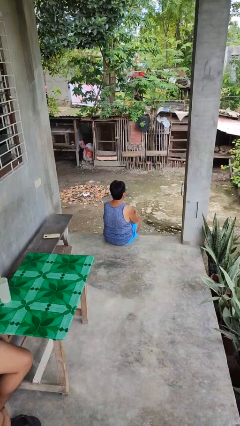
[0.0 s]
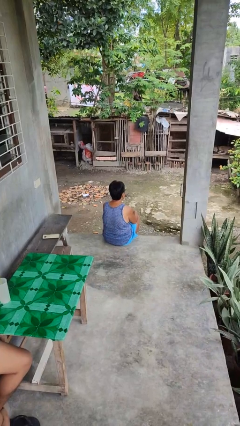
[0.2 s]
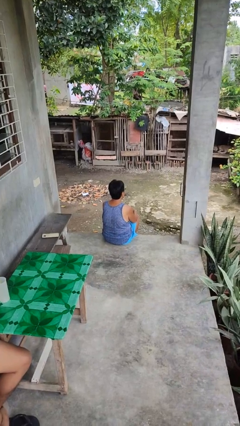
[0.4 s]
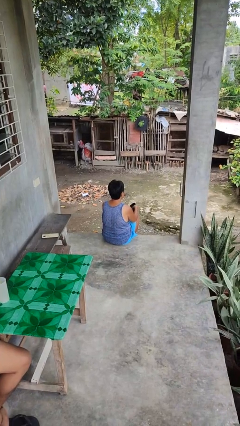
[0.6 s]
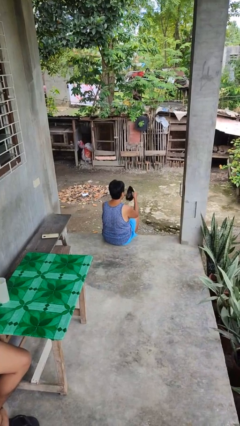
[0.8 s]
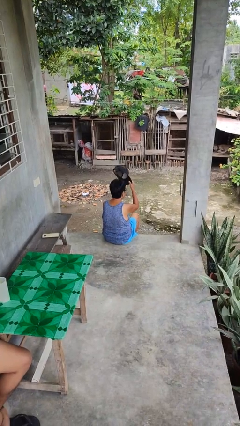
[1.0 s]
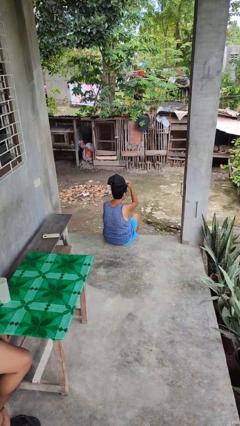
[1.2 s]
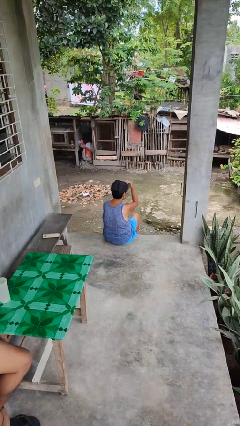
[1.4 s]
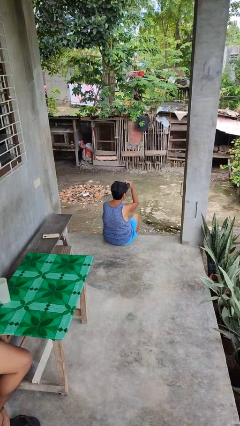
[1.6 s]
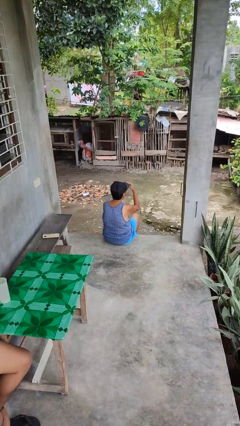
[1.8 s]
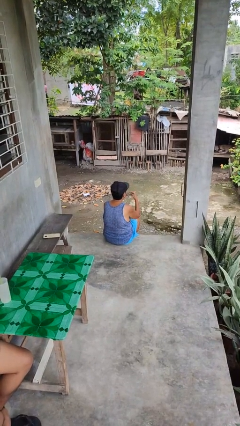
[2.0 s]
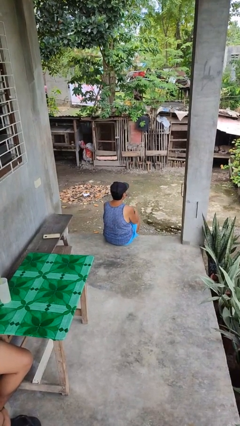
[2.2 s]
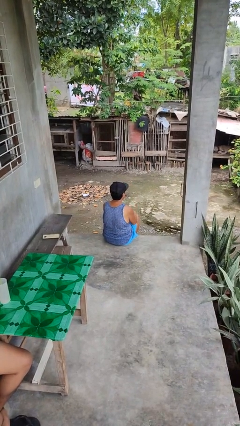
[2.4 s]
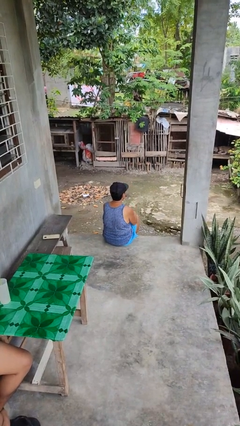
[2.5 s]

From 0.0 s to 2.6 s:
person puts on hat

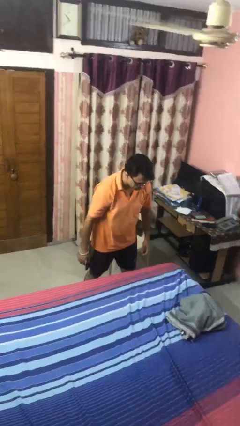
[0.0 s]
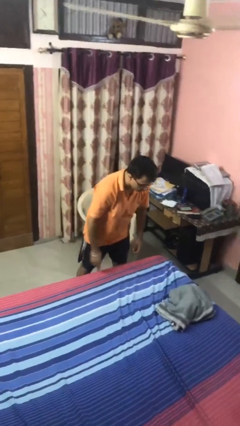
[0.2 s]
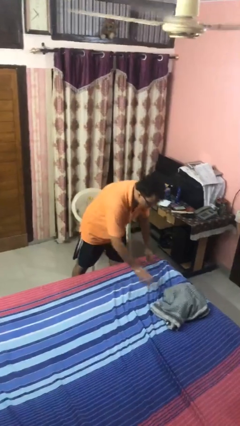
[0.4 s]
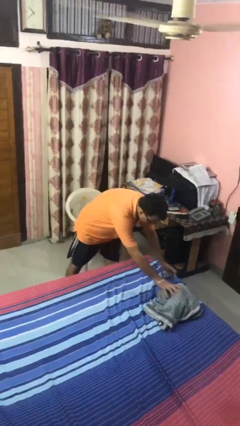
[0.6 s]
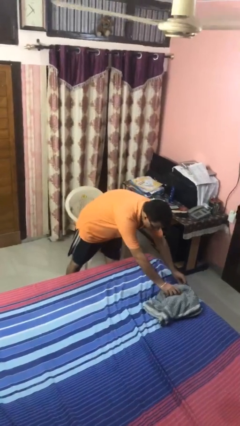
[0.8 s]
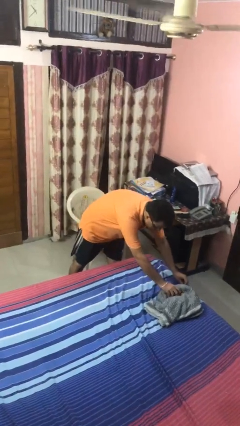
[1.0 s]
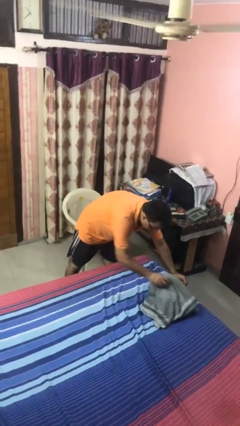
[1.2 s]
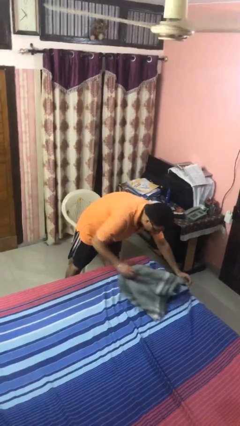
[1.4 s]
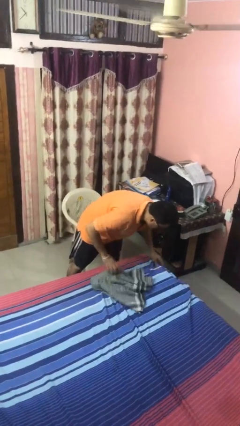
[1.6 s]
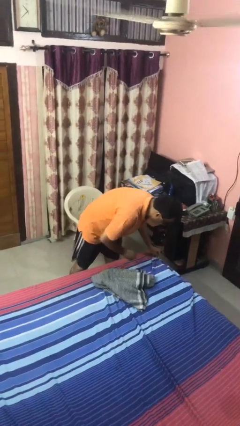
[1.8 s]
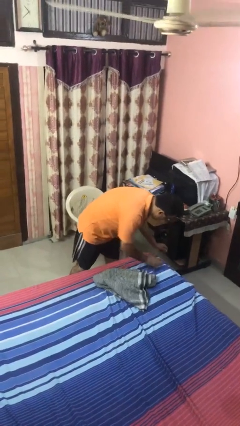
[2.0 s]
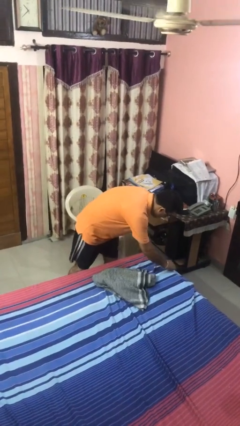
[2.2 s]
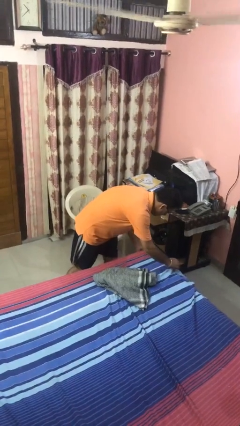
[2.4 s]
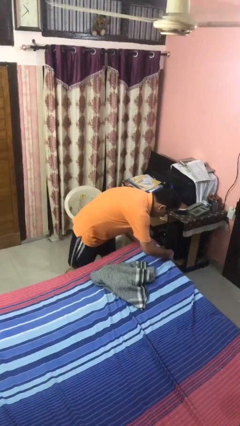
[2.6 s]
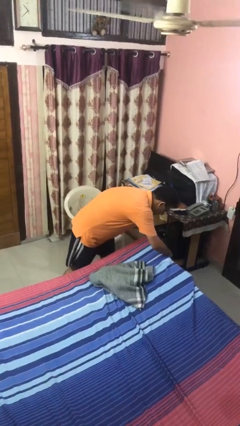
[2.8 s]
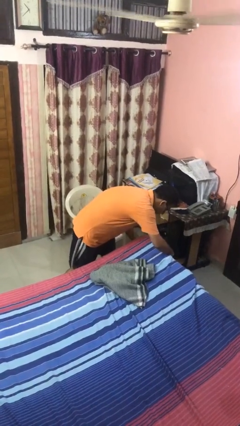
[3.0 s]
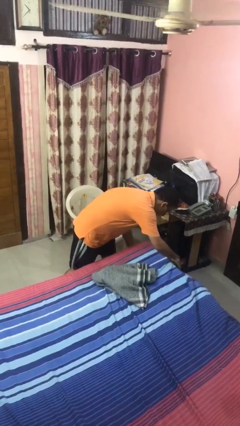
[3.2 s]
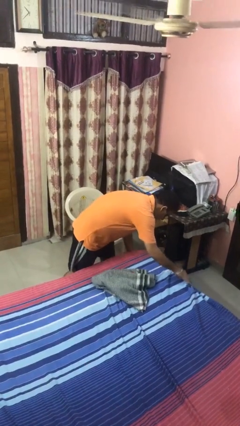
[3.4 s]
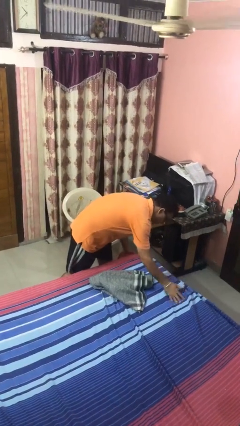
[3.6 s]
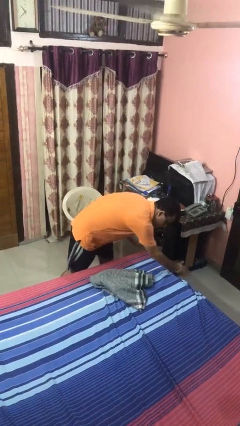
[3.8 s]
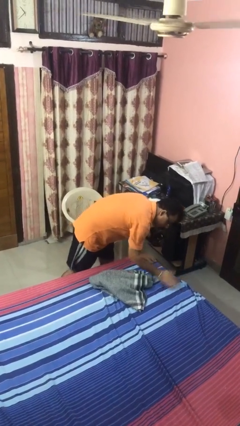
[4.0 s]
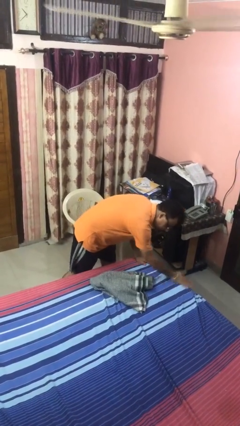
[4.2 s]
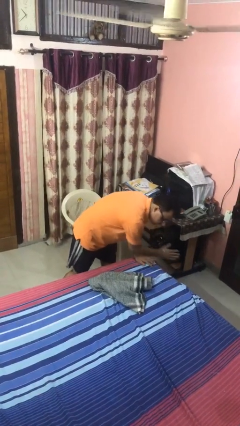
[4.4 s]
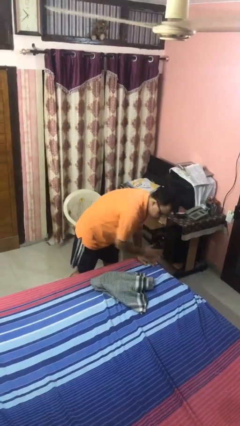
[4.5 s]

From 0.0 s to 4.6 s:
person makes bed

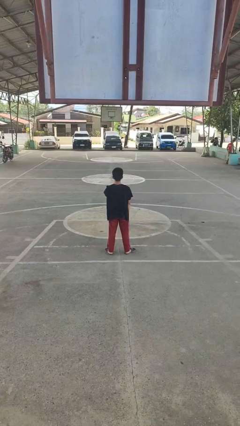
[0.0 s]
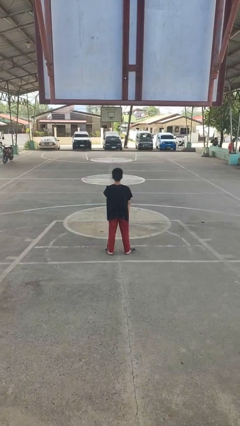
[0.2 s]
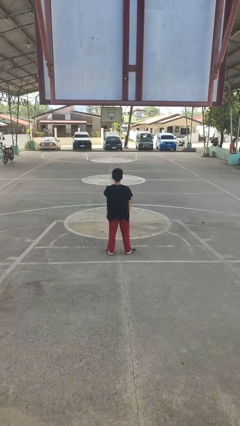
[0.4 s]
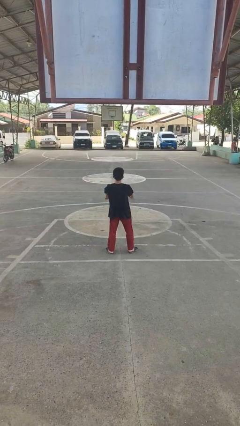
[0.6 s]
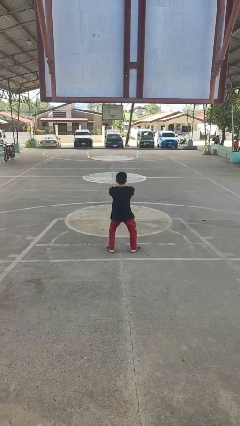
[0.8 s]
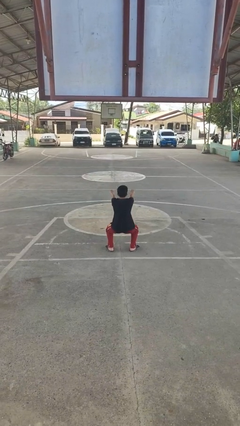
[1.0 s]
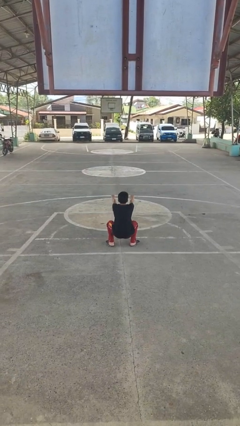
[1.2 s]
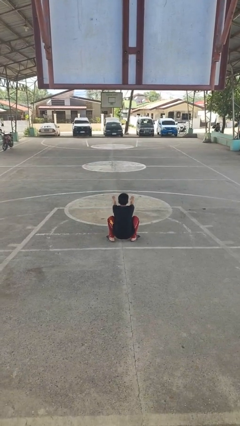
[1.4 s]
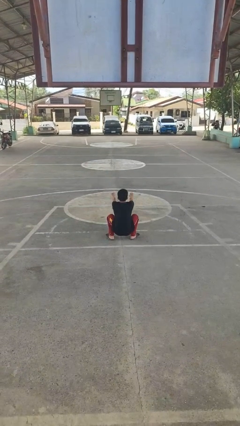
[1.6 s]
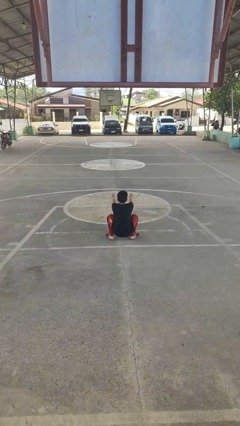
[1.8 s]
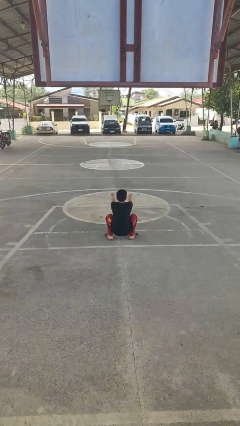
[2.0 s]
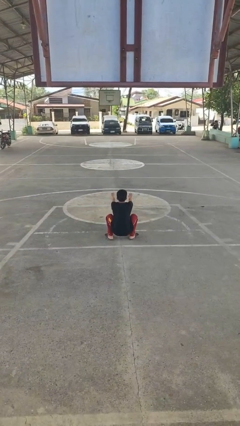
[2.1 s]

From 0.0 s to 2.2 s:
person squats

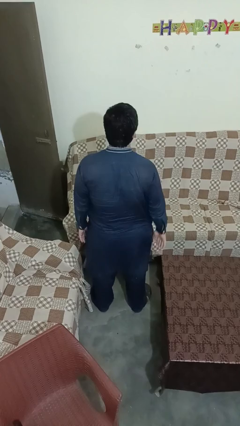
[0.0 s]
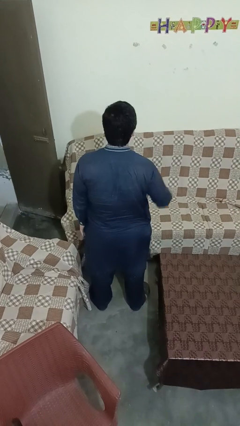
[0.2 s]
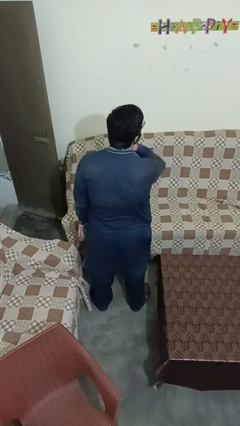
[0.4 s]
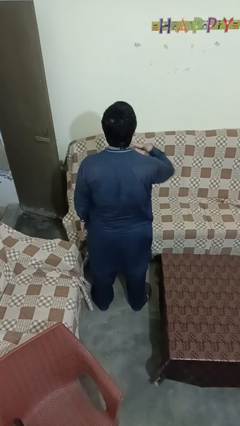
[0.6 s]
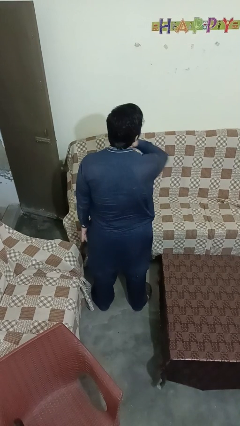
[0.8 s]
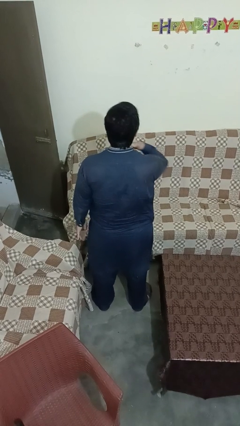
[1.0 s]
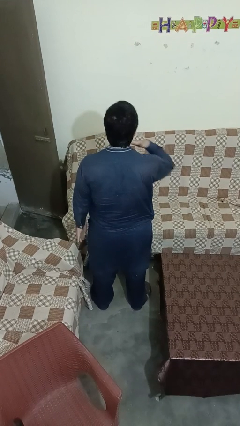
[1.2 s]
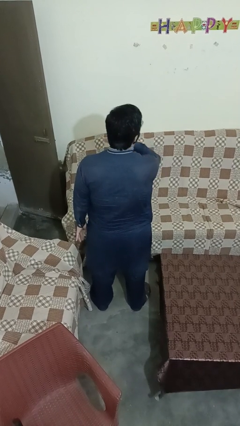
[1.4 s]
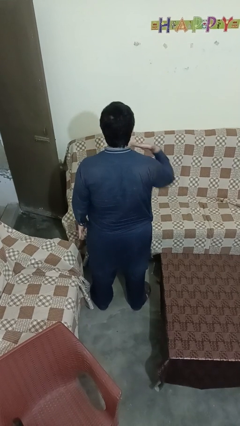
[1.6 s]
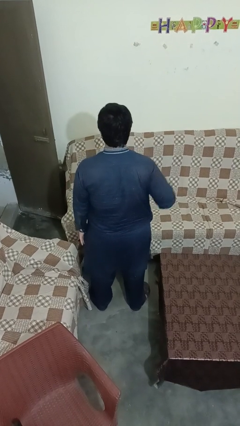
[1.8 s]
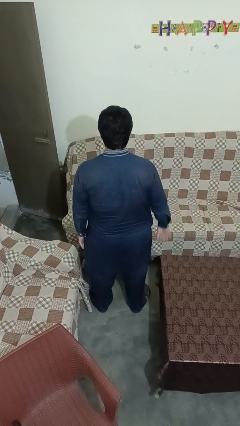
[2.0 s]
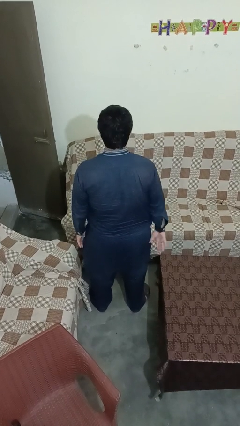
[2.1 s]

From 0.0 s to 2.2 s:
person gestures cut

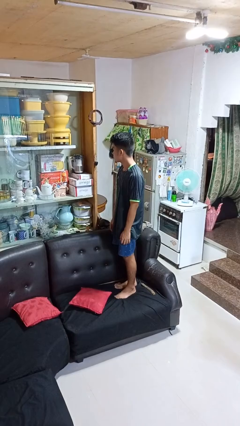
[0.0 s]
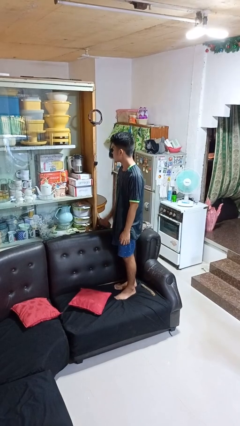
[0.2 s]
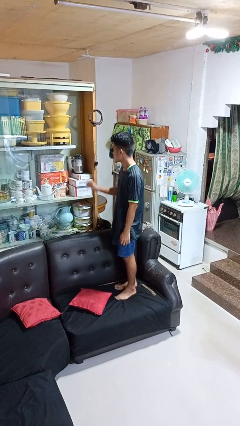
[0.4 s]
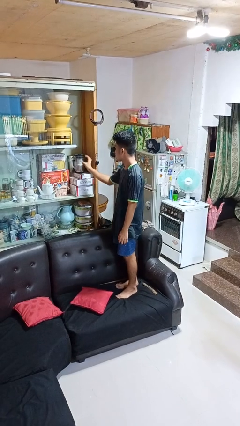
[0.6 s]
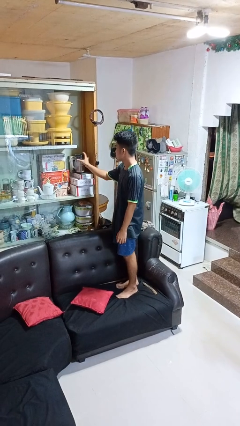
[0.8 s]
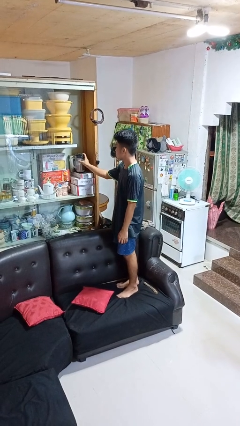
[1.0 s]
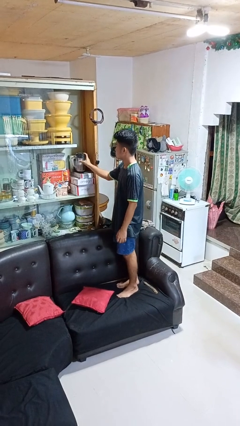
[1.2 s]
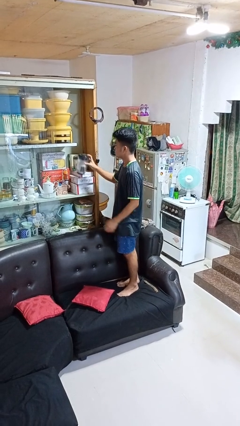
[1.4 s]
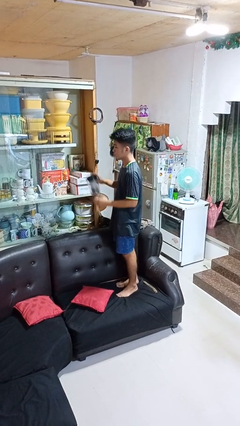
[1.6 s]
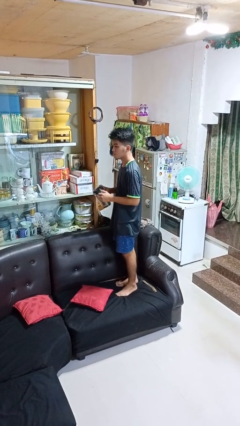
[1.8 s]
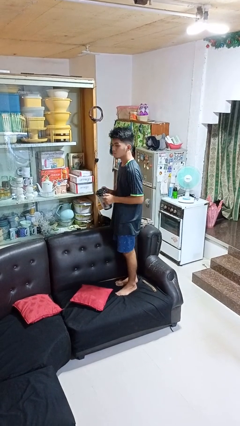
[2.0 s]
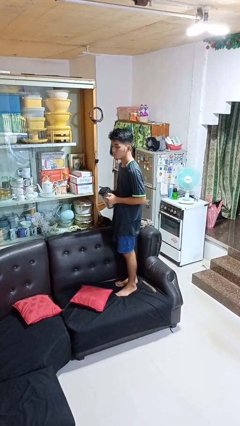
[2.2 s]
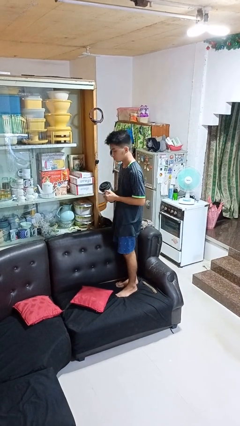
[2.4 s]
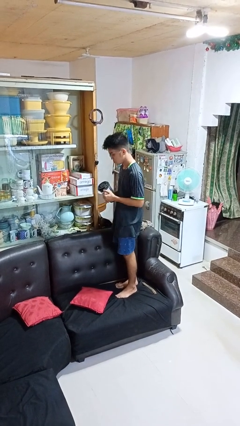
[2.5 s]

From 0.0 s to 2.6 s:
person picks up object from cabinet

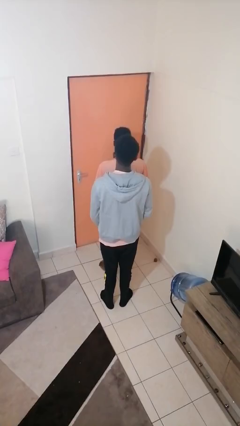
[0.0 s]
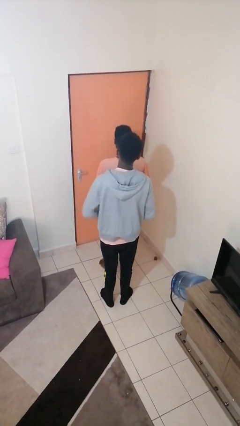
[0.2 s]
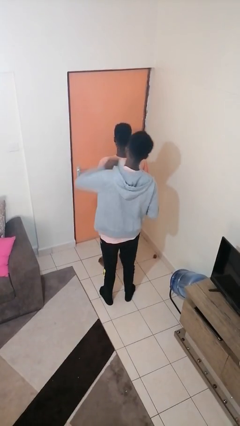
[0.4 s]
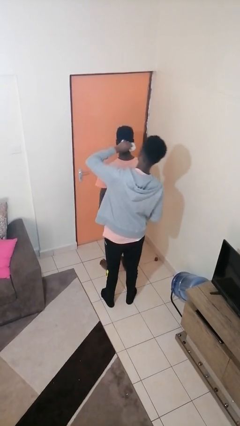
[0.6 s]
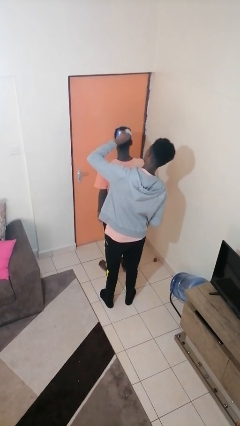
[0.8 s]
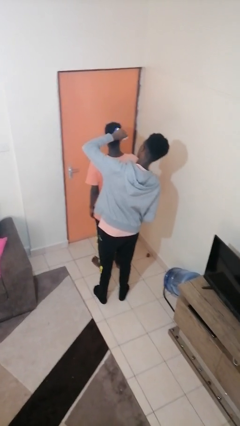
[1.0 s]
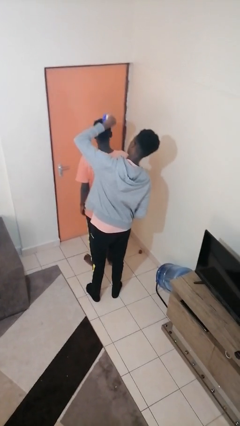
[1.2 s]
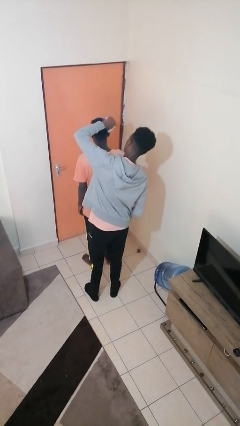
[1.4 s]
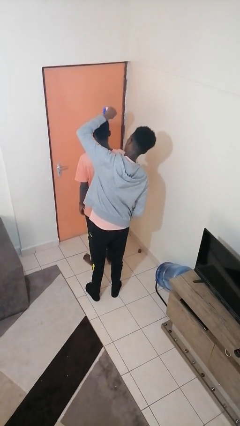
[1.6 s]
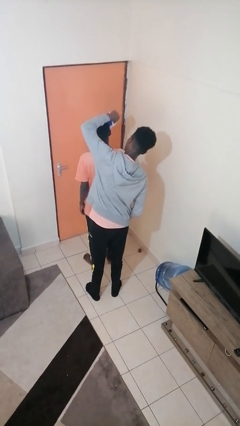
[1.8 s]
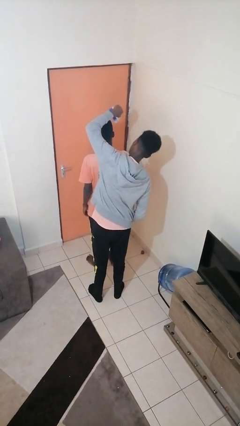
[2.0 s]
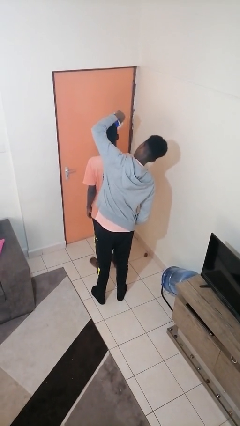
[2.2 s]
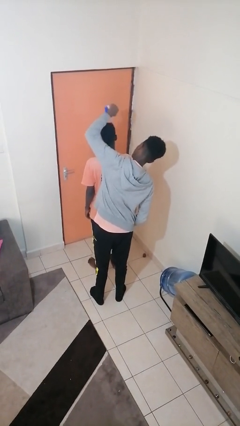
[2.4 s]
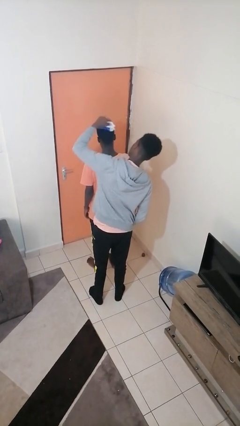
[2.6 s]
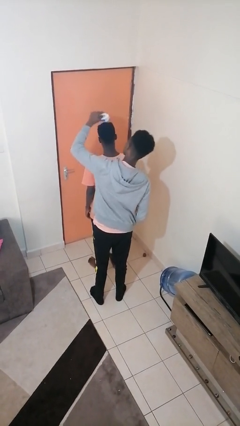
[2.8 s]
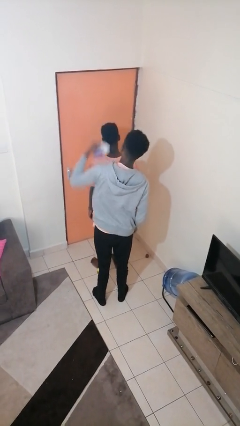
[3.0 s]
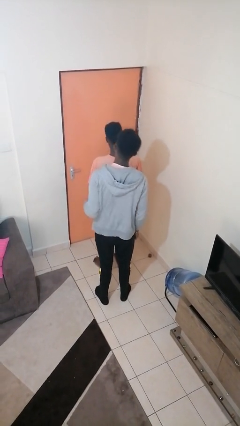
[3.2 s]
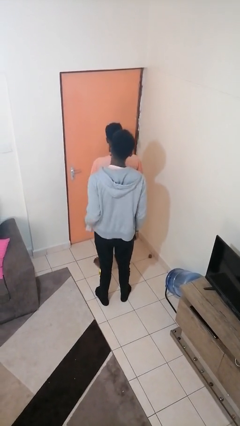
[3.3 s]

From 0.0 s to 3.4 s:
person brushes hair of person
